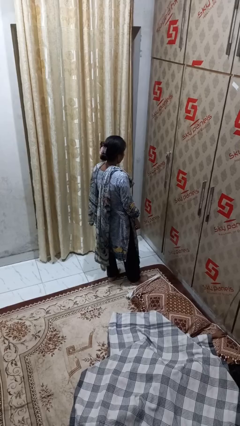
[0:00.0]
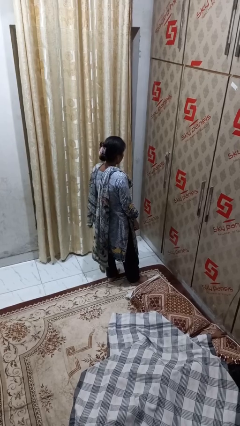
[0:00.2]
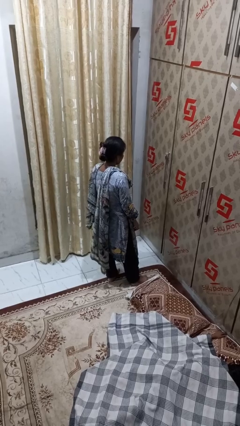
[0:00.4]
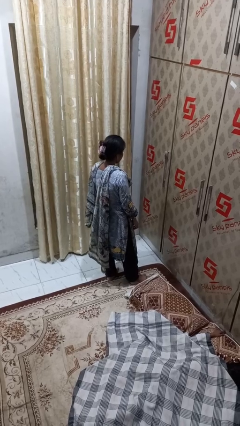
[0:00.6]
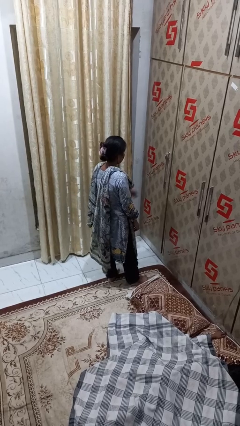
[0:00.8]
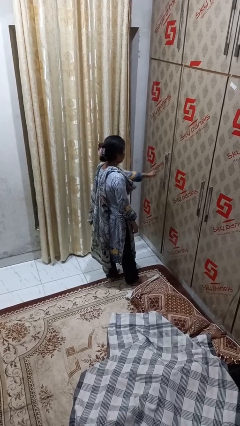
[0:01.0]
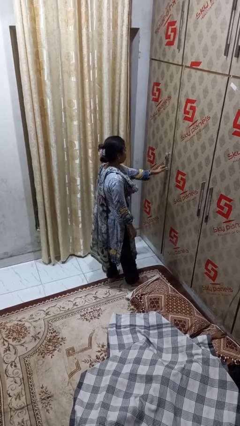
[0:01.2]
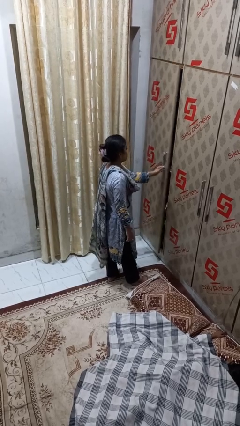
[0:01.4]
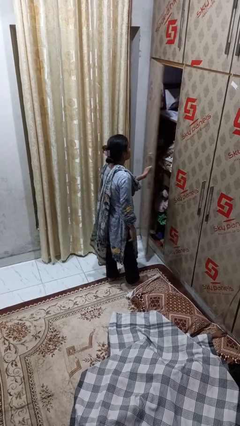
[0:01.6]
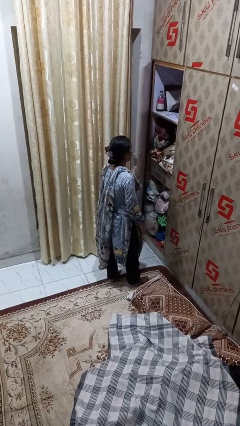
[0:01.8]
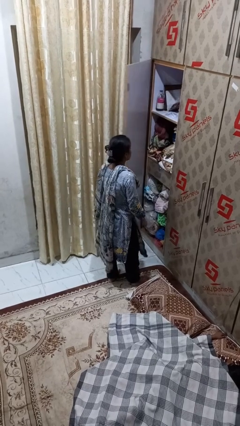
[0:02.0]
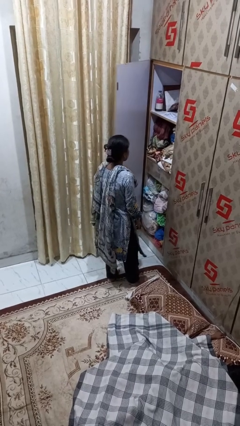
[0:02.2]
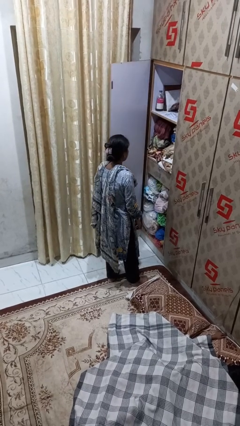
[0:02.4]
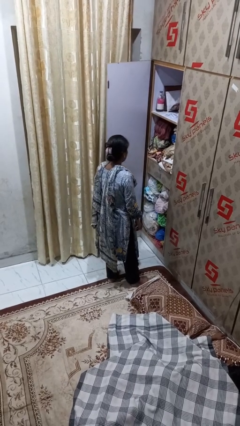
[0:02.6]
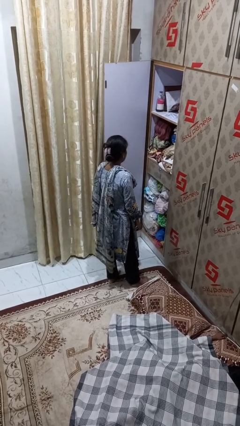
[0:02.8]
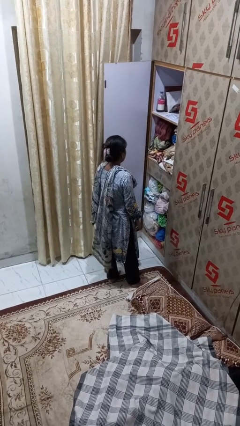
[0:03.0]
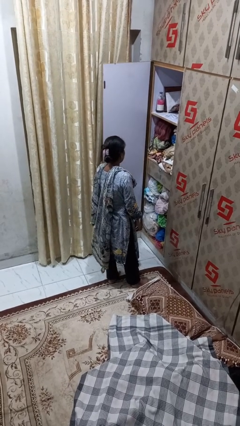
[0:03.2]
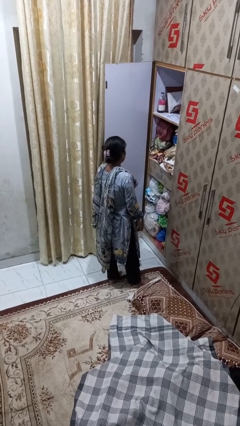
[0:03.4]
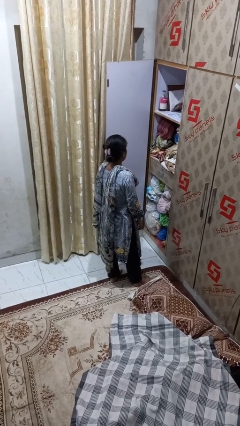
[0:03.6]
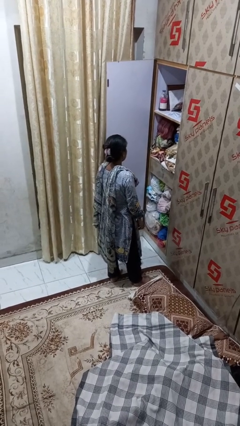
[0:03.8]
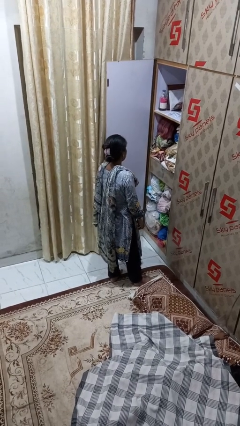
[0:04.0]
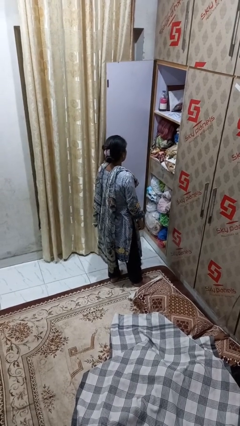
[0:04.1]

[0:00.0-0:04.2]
person opens closet door

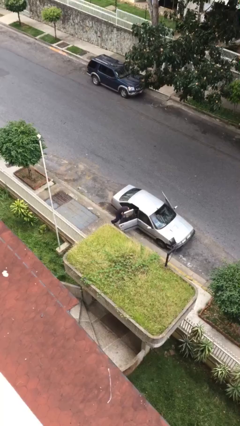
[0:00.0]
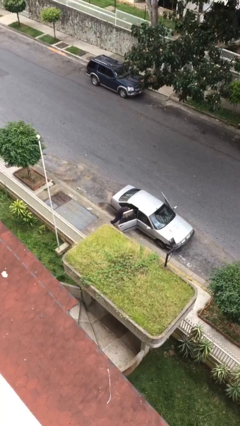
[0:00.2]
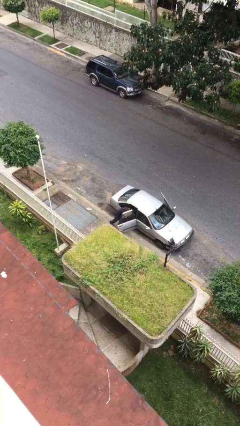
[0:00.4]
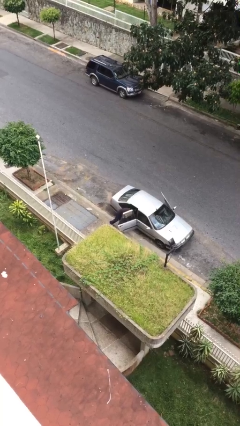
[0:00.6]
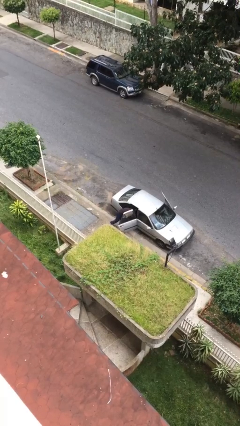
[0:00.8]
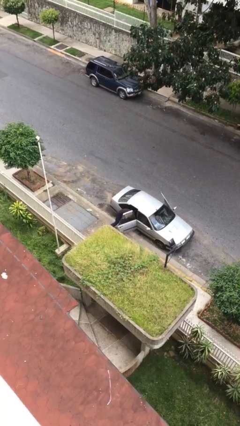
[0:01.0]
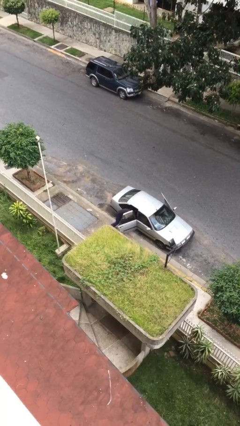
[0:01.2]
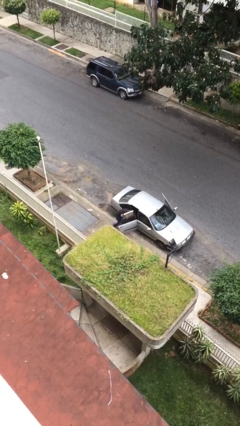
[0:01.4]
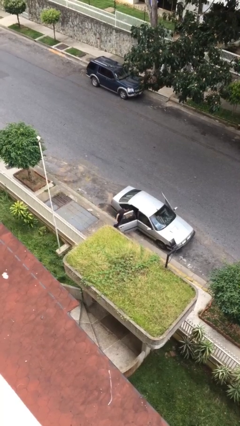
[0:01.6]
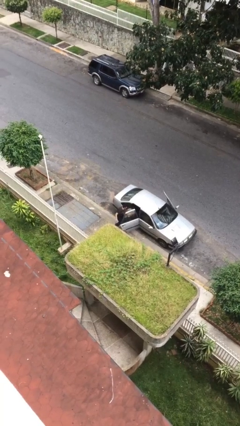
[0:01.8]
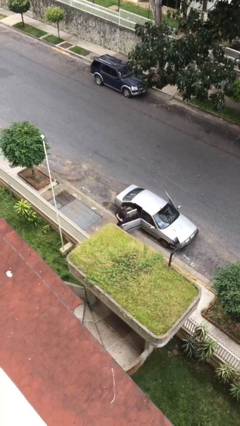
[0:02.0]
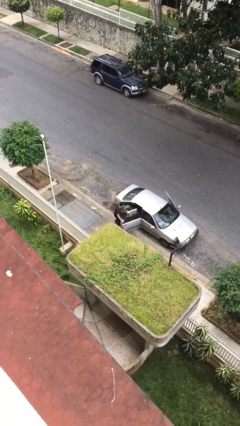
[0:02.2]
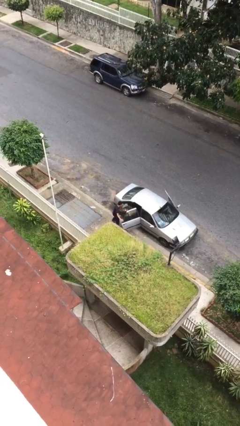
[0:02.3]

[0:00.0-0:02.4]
person unloads car

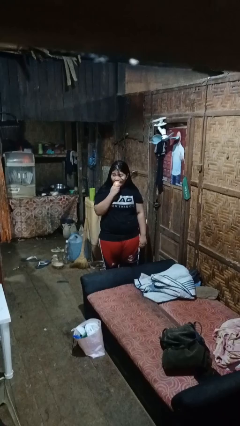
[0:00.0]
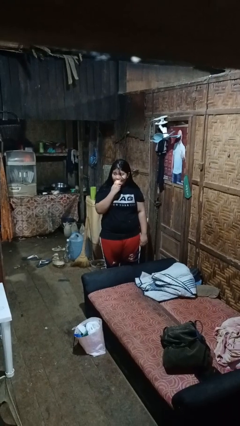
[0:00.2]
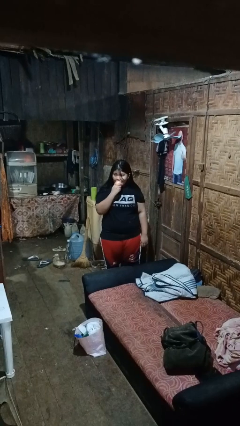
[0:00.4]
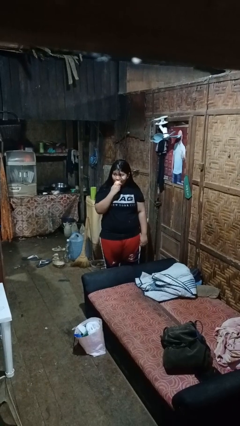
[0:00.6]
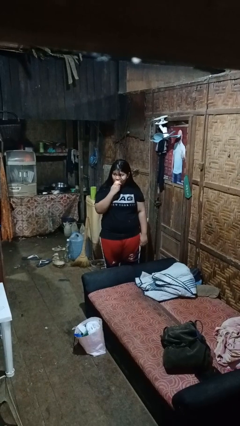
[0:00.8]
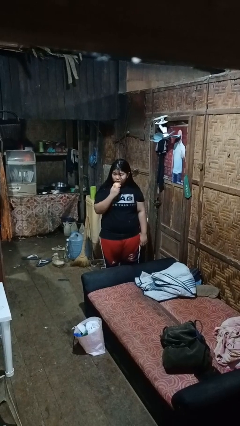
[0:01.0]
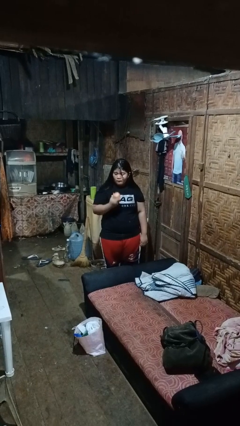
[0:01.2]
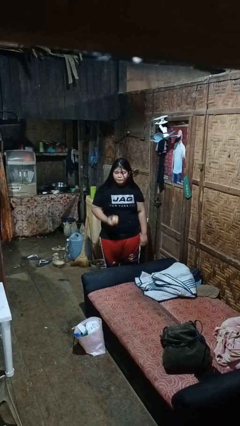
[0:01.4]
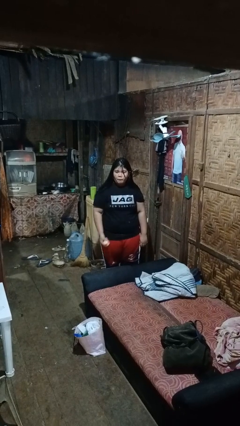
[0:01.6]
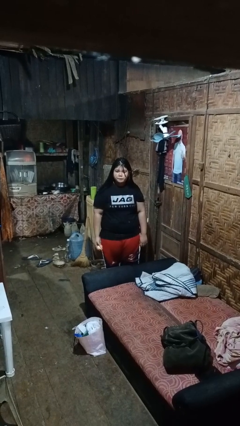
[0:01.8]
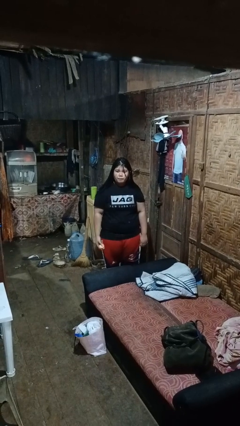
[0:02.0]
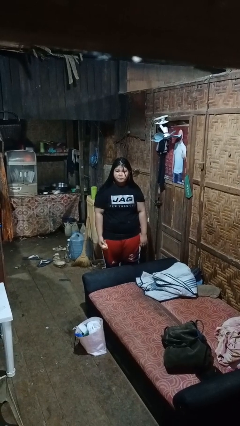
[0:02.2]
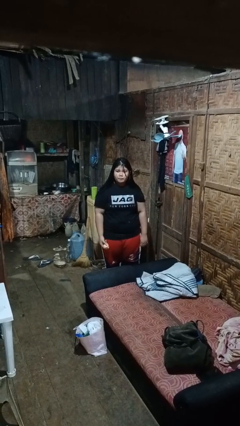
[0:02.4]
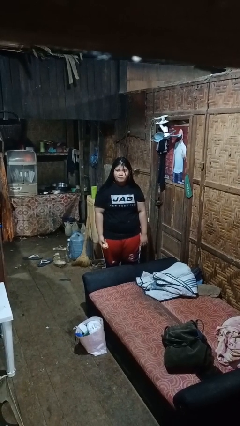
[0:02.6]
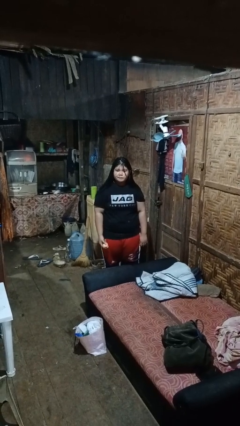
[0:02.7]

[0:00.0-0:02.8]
person eats apple

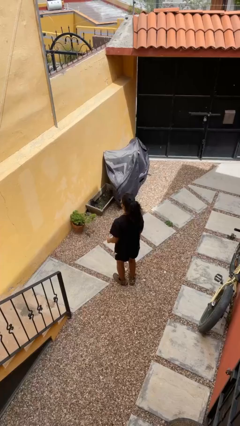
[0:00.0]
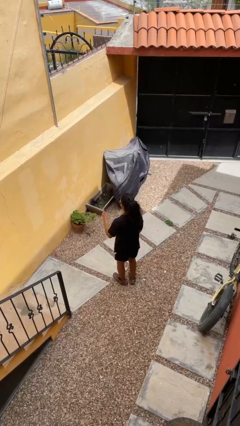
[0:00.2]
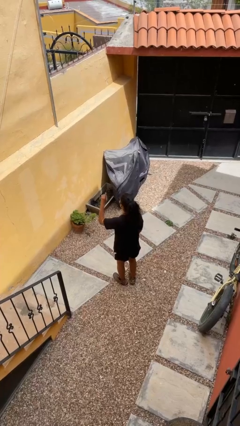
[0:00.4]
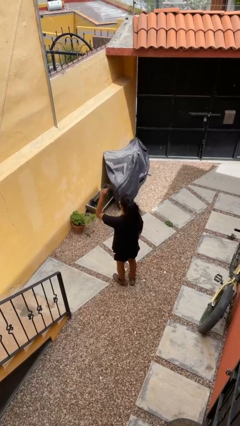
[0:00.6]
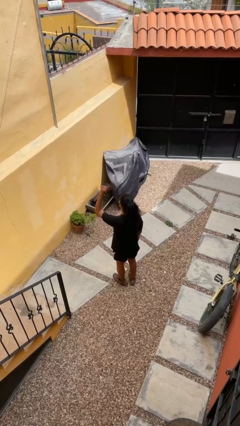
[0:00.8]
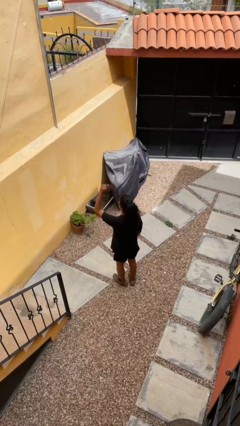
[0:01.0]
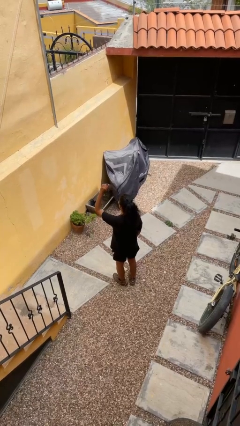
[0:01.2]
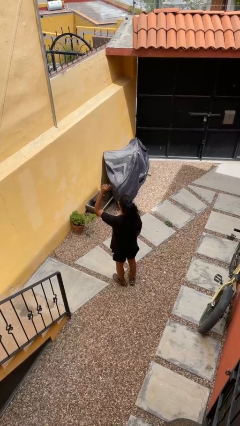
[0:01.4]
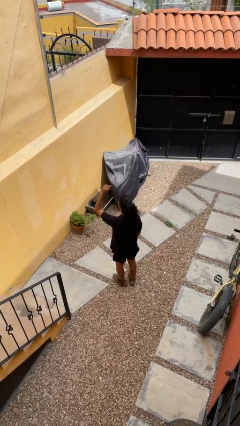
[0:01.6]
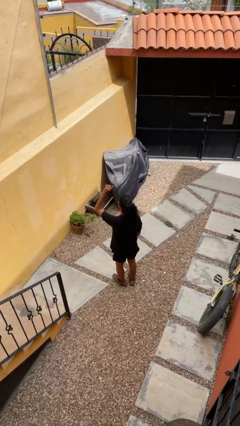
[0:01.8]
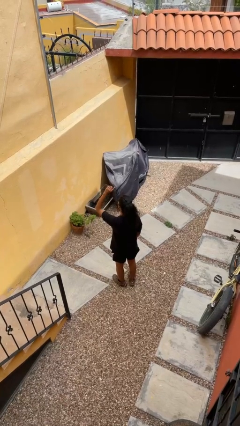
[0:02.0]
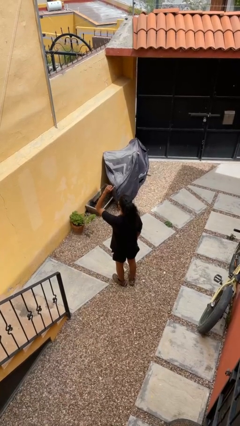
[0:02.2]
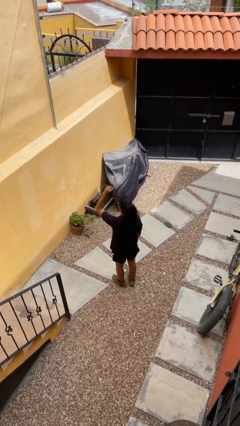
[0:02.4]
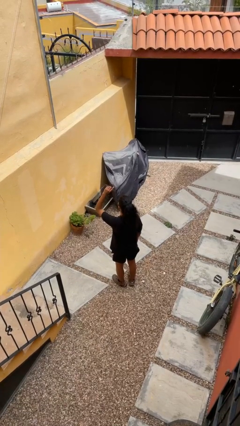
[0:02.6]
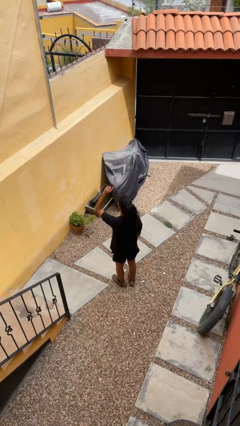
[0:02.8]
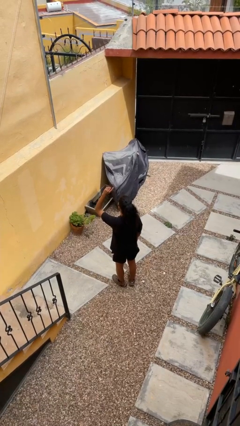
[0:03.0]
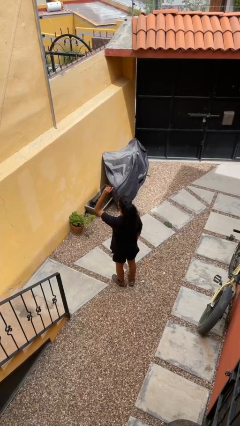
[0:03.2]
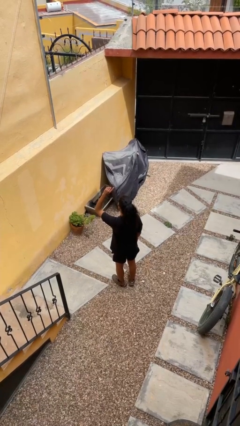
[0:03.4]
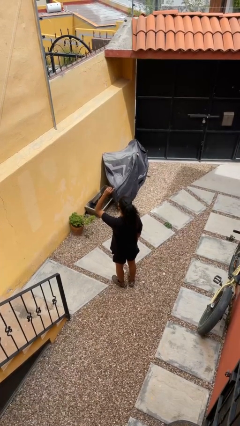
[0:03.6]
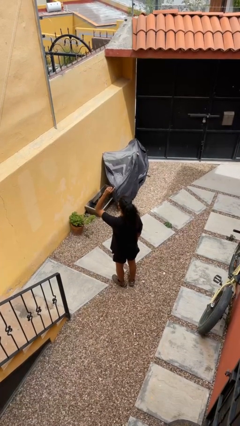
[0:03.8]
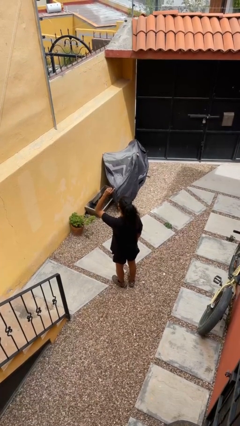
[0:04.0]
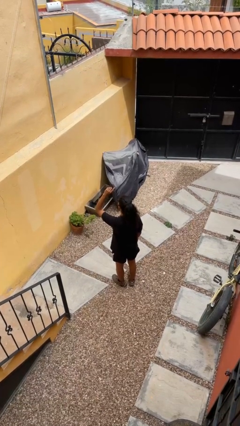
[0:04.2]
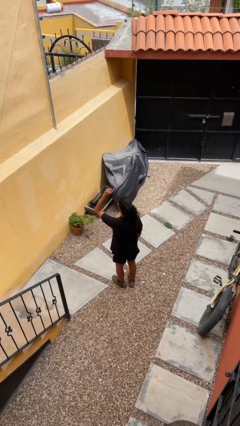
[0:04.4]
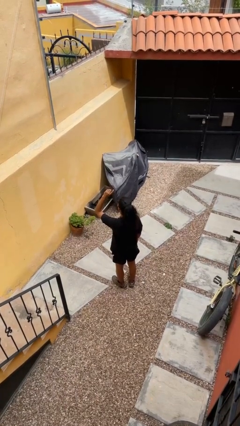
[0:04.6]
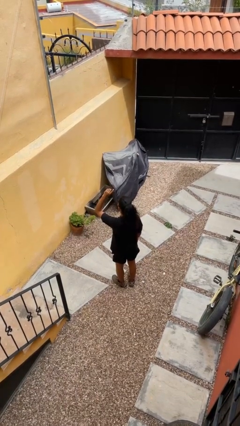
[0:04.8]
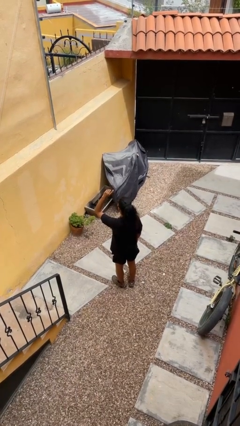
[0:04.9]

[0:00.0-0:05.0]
person gestures raise hand

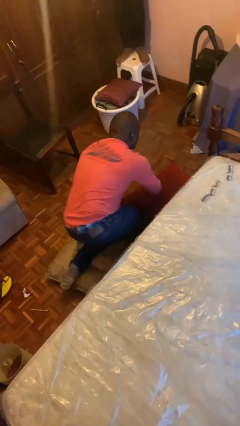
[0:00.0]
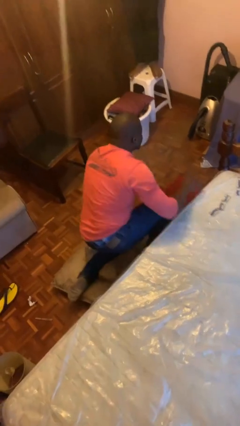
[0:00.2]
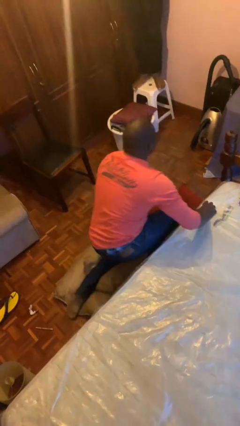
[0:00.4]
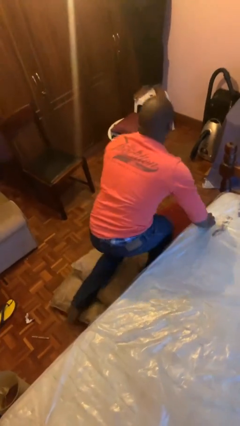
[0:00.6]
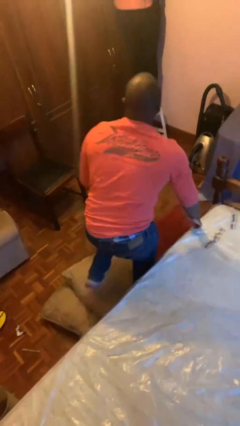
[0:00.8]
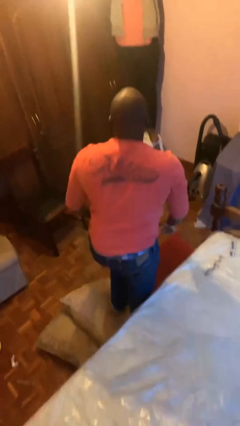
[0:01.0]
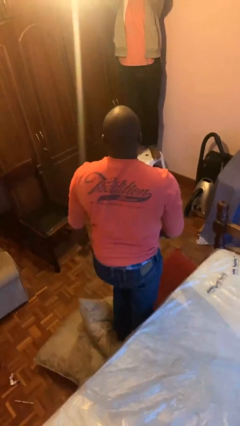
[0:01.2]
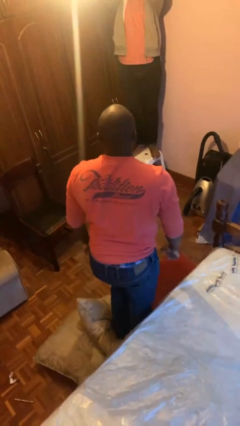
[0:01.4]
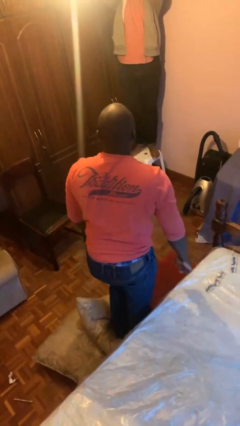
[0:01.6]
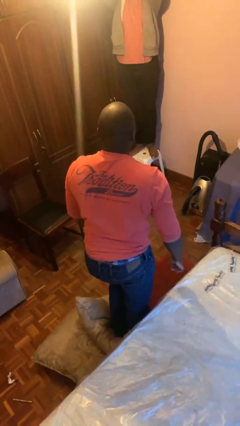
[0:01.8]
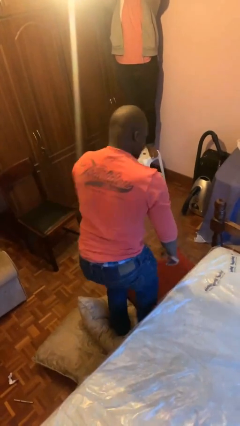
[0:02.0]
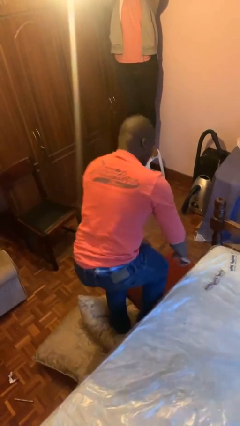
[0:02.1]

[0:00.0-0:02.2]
person stands up from floor

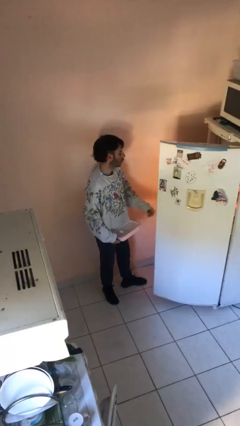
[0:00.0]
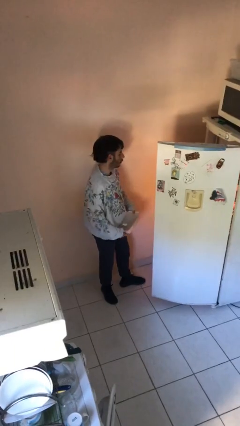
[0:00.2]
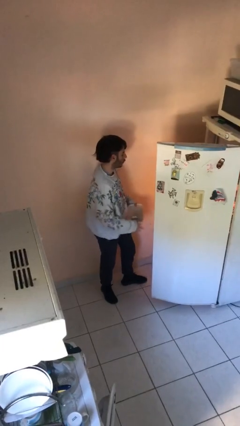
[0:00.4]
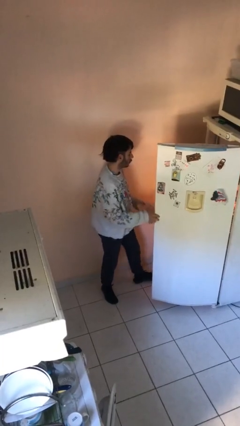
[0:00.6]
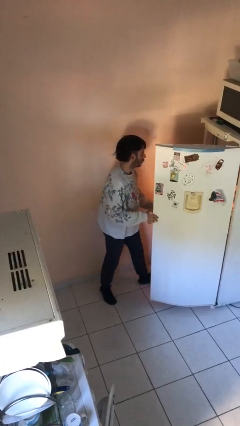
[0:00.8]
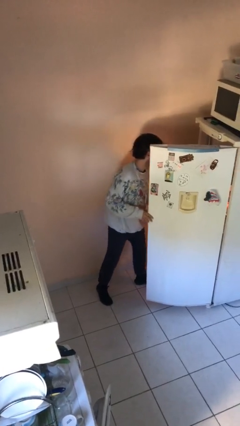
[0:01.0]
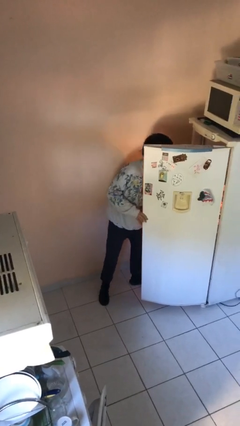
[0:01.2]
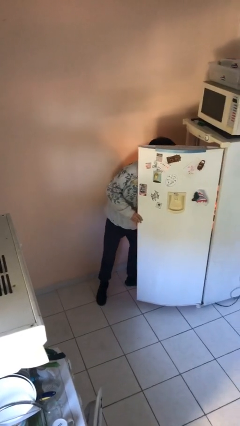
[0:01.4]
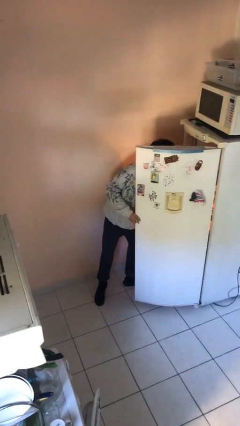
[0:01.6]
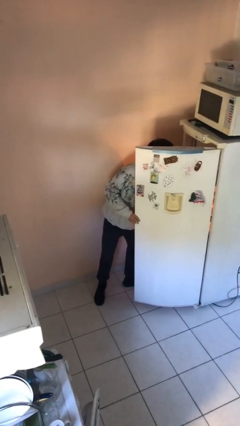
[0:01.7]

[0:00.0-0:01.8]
person puts object into refrigerator
